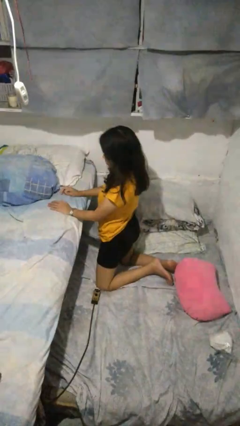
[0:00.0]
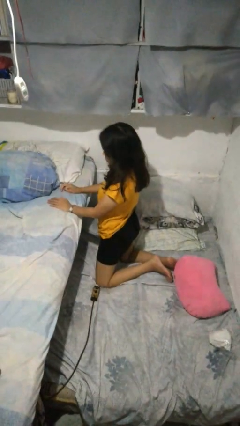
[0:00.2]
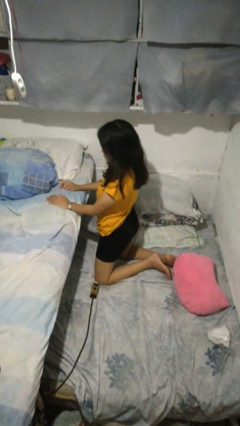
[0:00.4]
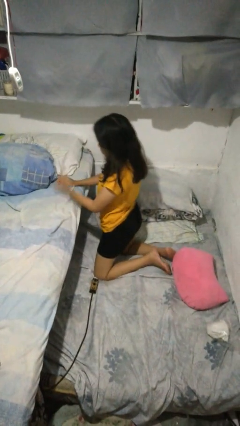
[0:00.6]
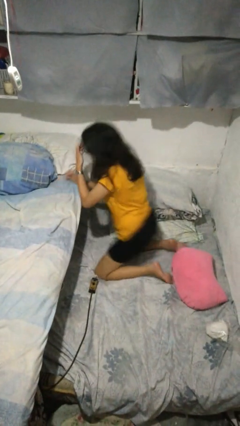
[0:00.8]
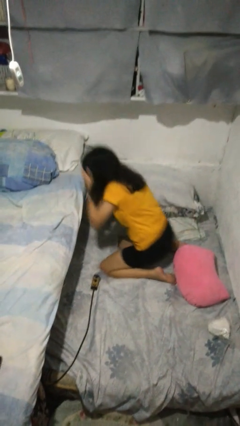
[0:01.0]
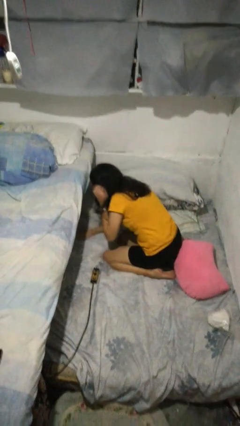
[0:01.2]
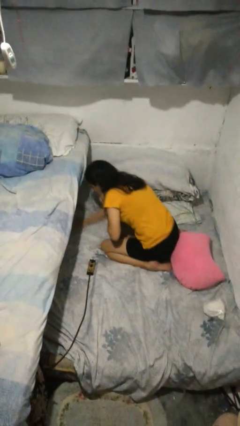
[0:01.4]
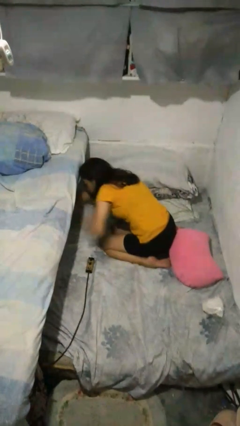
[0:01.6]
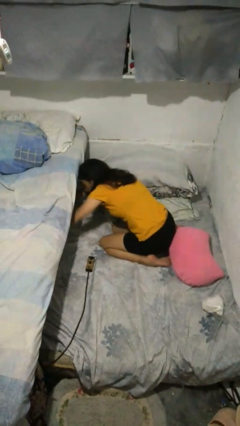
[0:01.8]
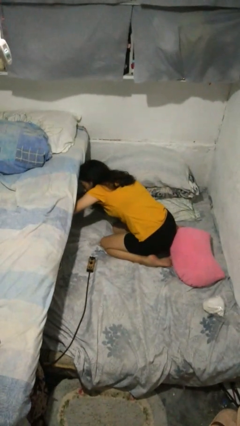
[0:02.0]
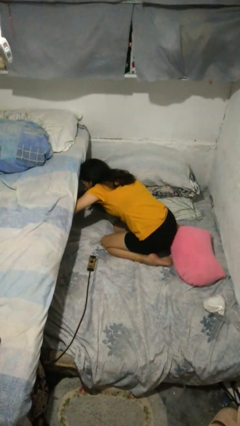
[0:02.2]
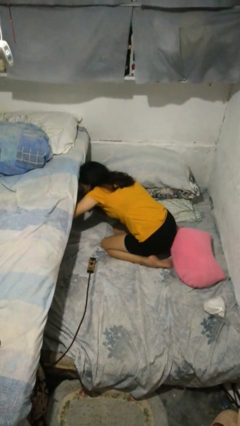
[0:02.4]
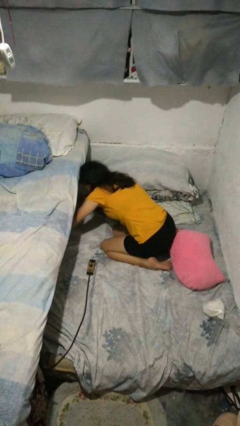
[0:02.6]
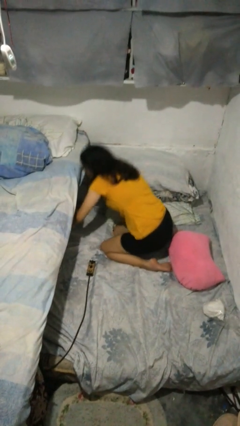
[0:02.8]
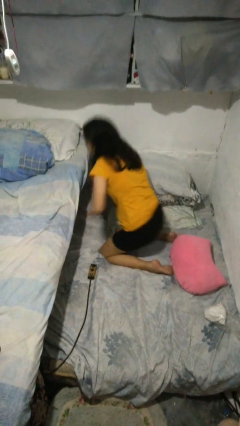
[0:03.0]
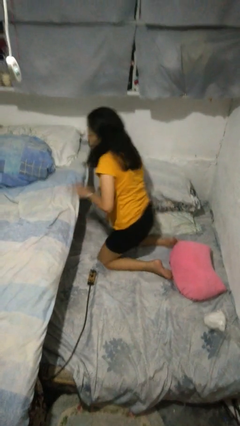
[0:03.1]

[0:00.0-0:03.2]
person searches under bed

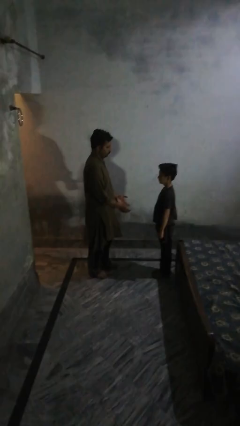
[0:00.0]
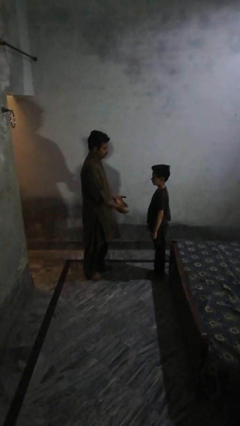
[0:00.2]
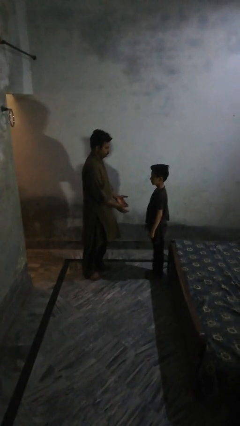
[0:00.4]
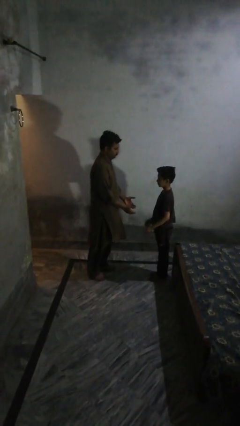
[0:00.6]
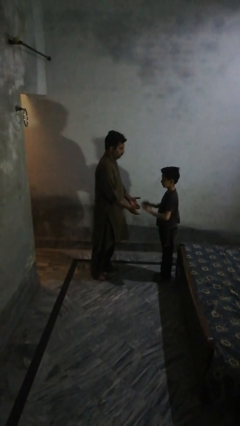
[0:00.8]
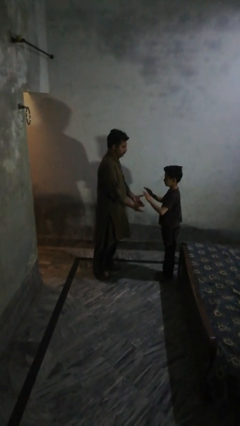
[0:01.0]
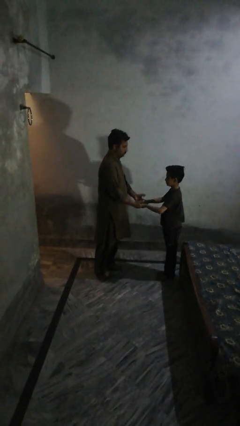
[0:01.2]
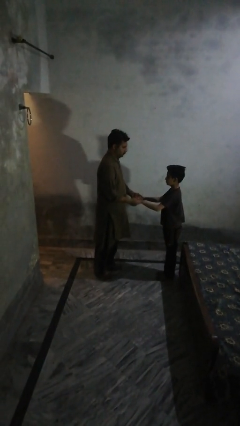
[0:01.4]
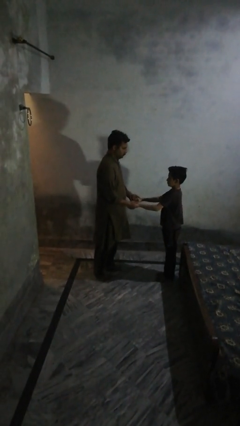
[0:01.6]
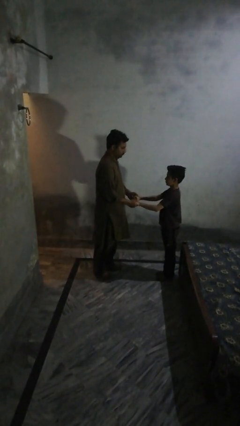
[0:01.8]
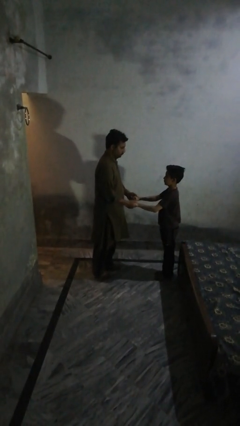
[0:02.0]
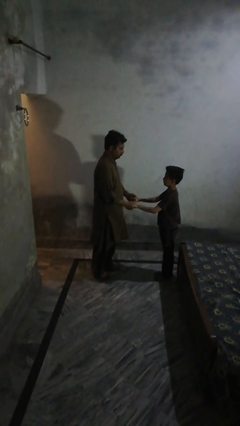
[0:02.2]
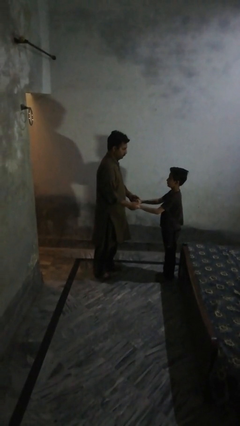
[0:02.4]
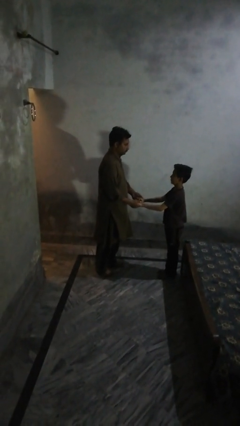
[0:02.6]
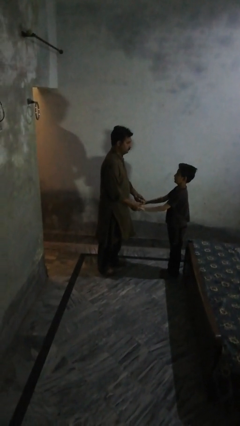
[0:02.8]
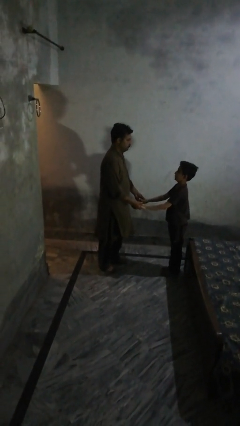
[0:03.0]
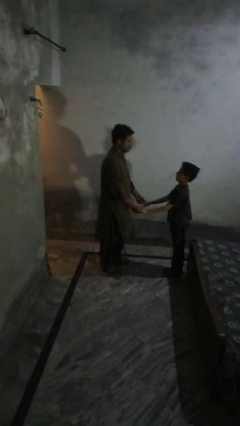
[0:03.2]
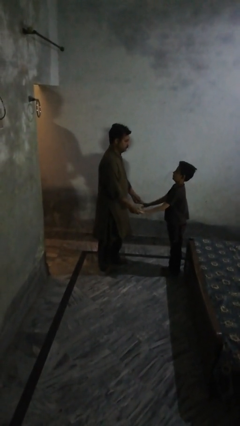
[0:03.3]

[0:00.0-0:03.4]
person highfives hand

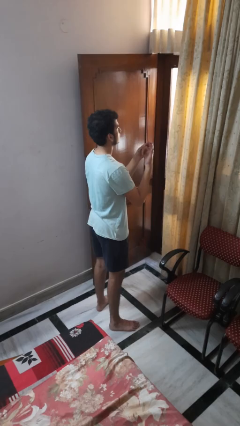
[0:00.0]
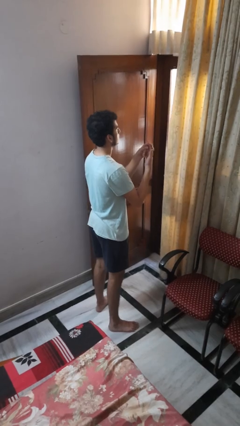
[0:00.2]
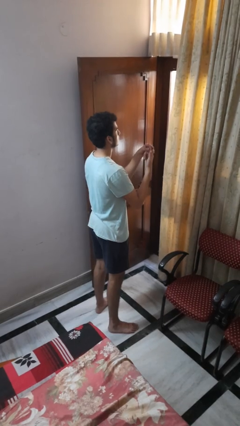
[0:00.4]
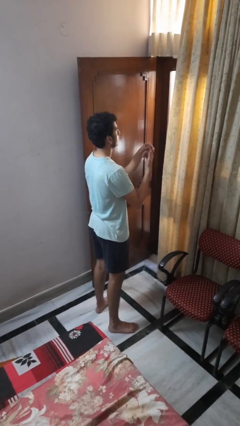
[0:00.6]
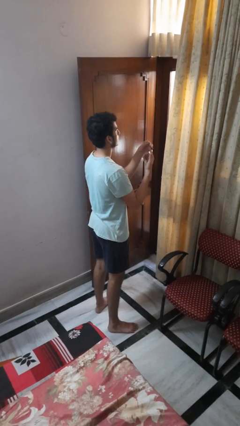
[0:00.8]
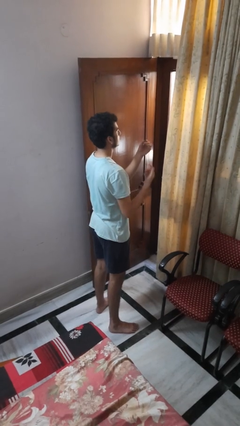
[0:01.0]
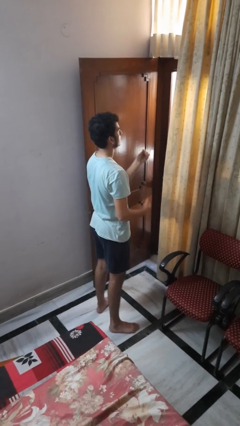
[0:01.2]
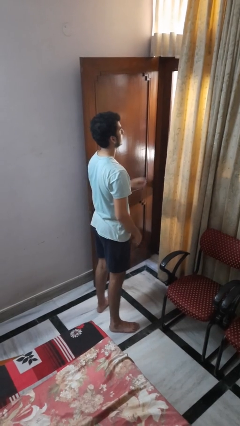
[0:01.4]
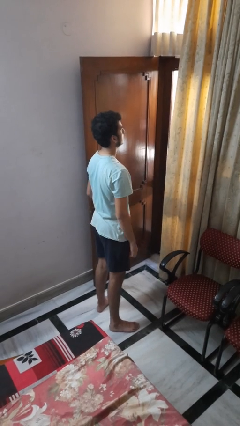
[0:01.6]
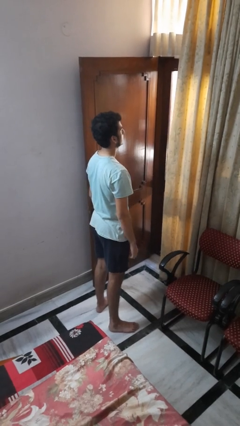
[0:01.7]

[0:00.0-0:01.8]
person takes off ring

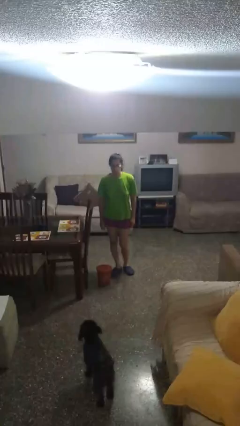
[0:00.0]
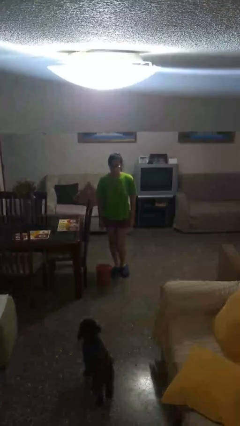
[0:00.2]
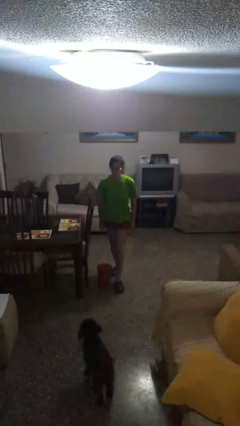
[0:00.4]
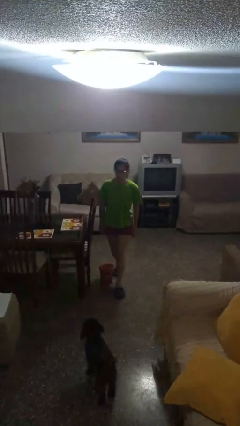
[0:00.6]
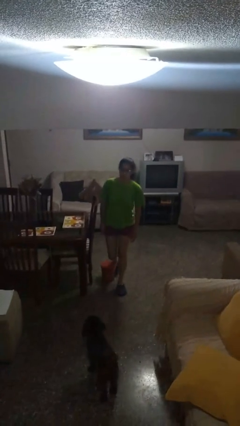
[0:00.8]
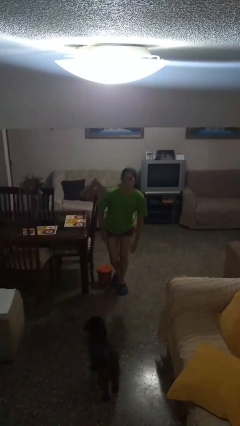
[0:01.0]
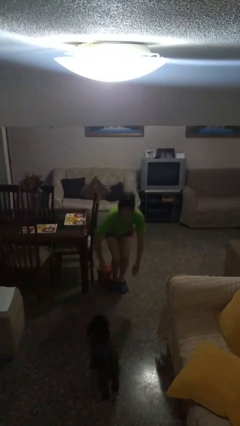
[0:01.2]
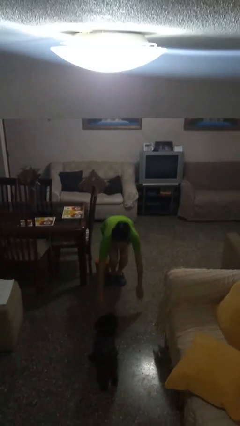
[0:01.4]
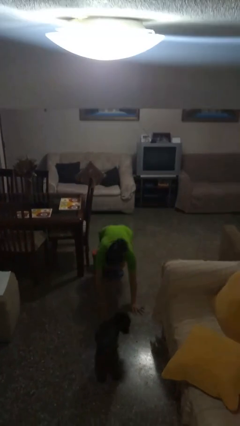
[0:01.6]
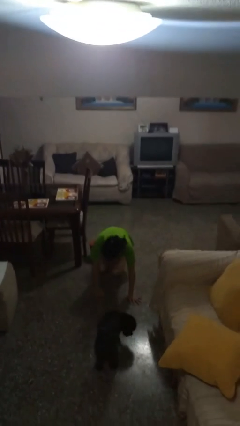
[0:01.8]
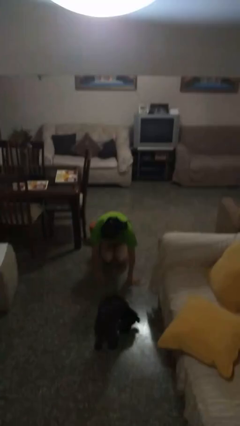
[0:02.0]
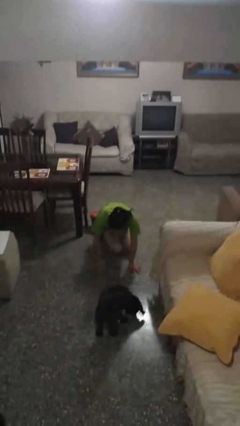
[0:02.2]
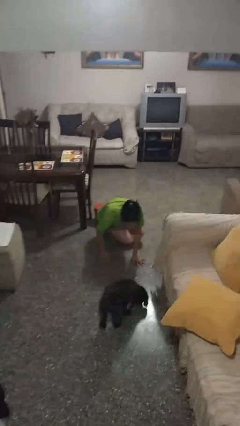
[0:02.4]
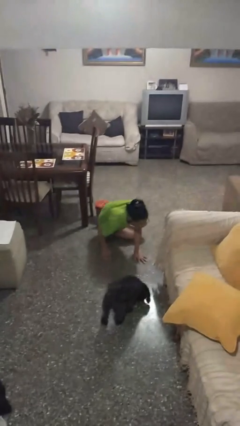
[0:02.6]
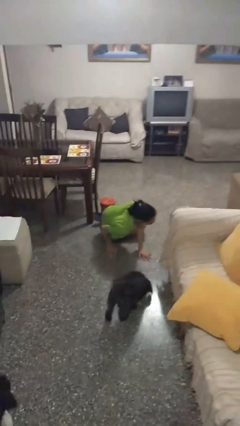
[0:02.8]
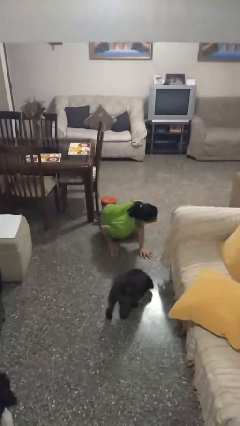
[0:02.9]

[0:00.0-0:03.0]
person trips on object on floor

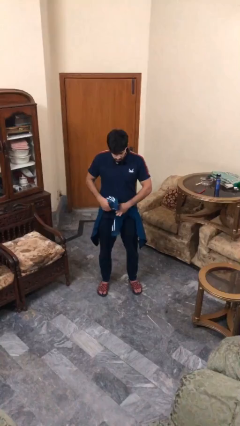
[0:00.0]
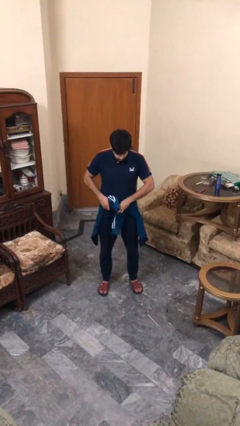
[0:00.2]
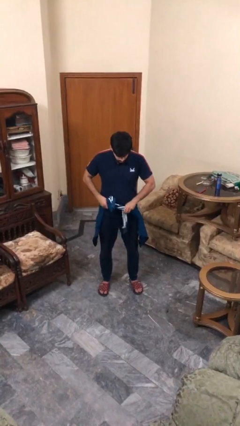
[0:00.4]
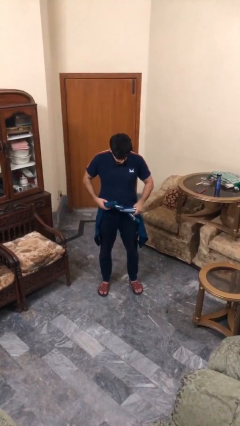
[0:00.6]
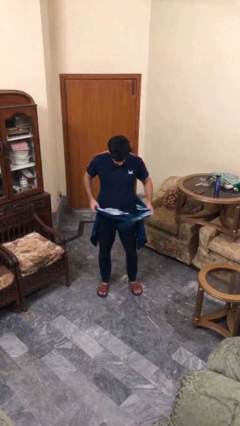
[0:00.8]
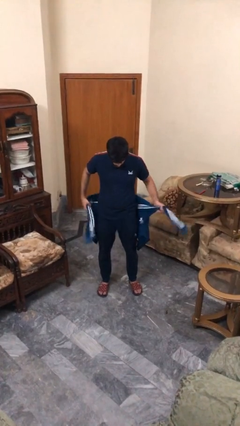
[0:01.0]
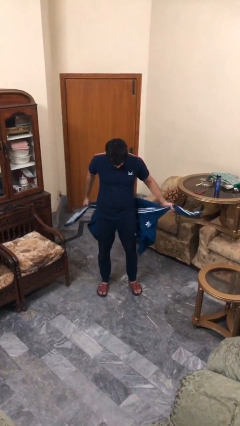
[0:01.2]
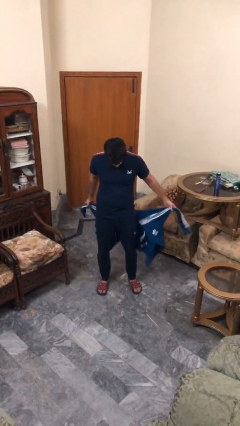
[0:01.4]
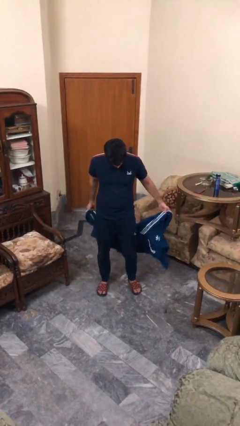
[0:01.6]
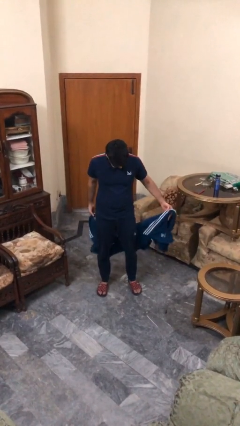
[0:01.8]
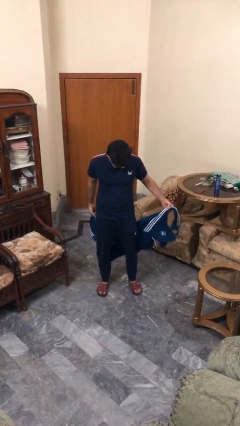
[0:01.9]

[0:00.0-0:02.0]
person unties jacket around waist

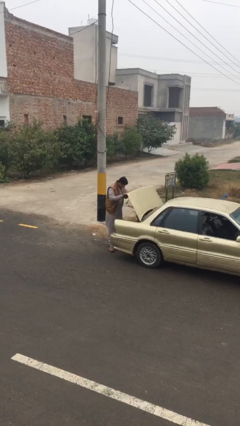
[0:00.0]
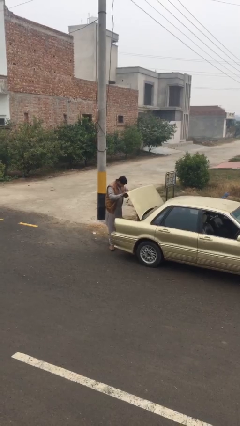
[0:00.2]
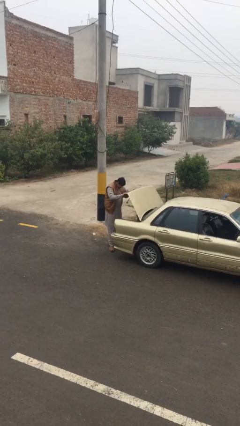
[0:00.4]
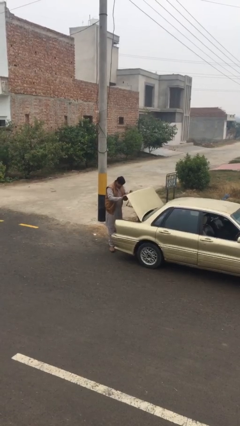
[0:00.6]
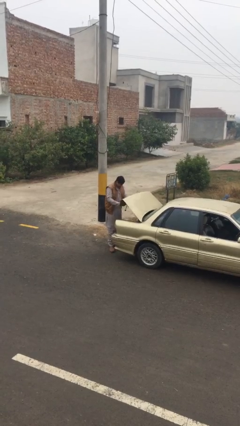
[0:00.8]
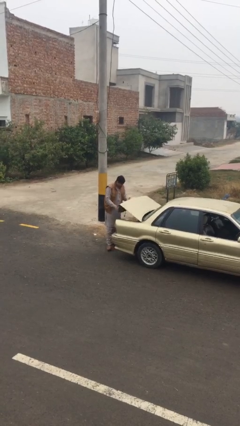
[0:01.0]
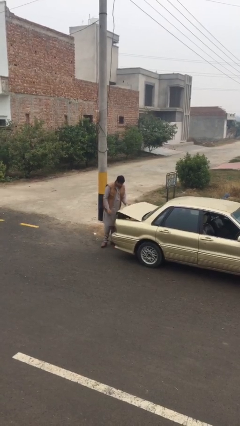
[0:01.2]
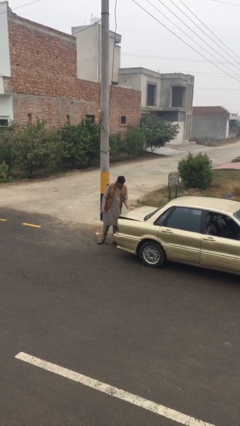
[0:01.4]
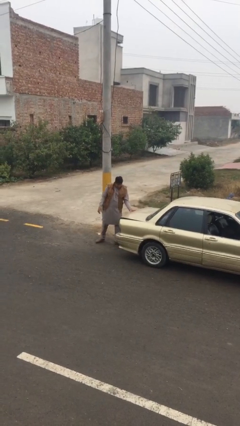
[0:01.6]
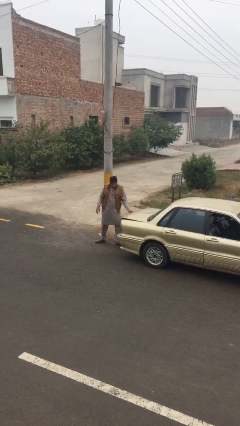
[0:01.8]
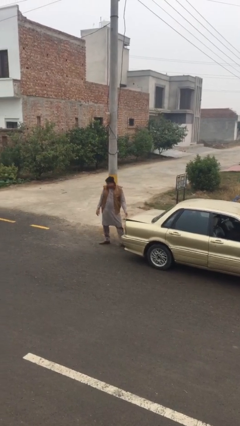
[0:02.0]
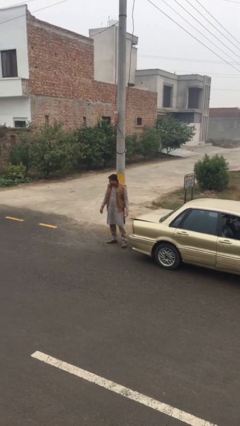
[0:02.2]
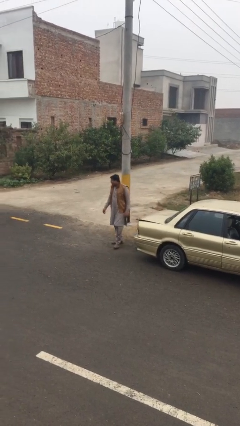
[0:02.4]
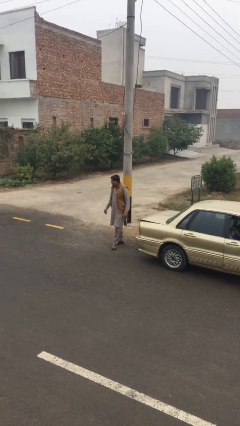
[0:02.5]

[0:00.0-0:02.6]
person closes car trunk

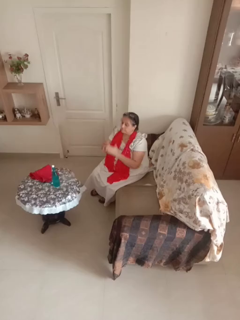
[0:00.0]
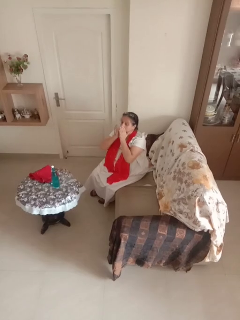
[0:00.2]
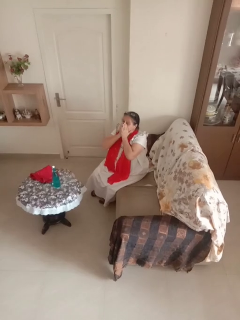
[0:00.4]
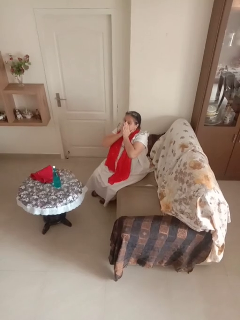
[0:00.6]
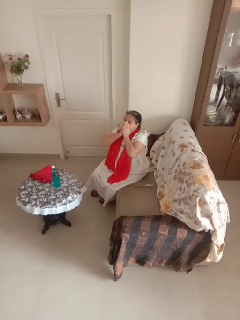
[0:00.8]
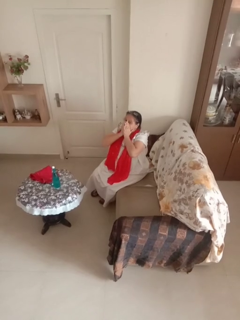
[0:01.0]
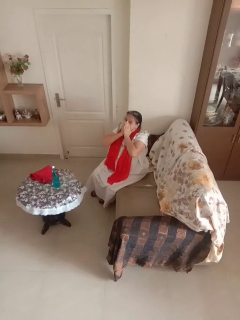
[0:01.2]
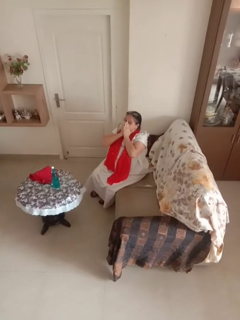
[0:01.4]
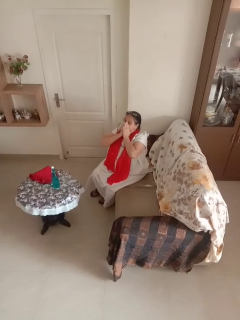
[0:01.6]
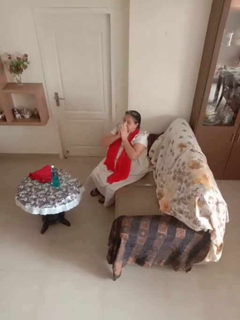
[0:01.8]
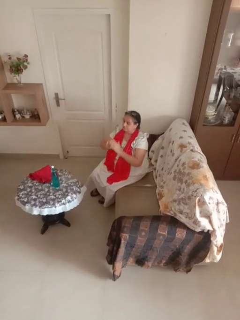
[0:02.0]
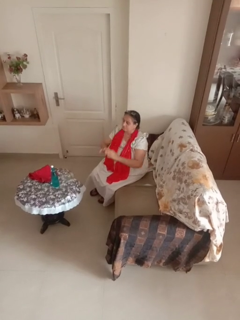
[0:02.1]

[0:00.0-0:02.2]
person covers face with hands
